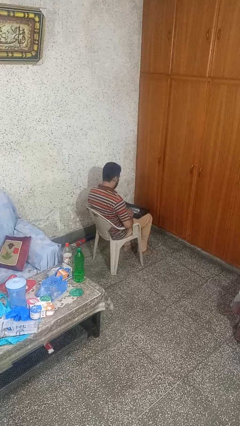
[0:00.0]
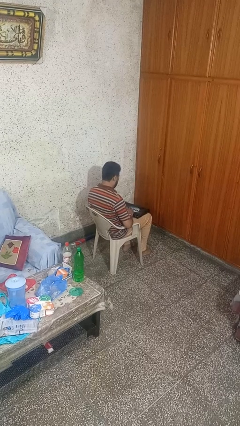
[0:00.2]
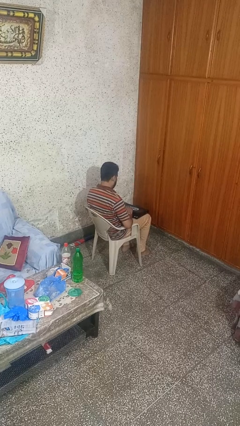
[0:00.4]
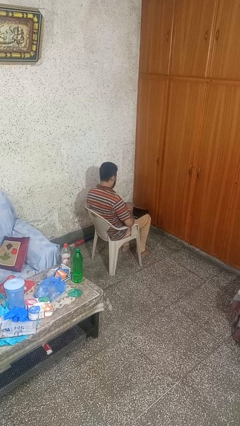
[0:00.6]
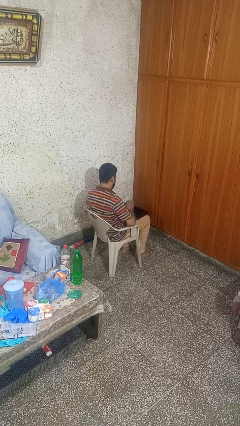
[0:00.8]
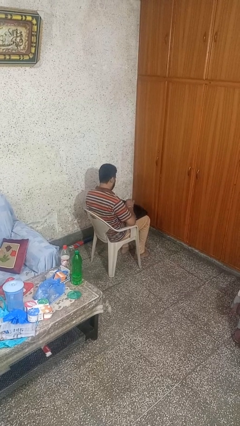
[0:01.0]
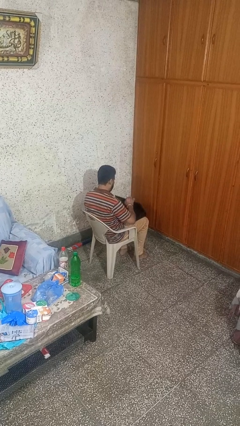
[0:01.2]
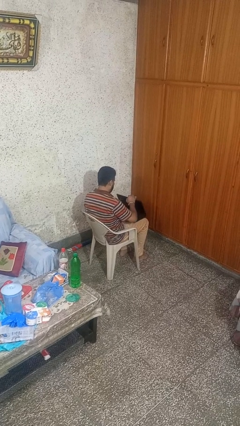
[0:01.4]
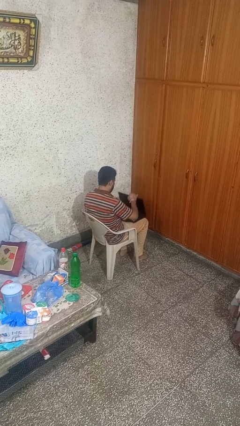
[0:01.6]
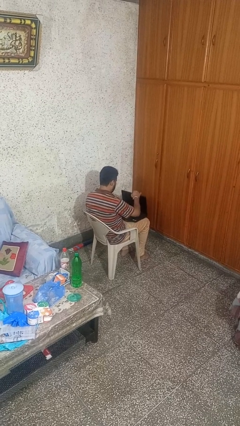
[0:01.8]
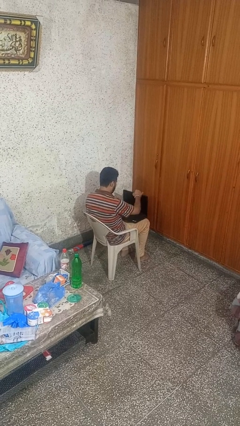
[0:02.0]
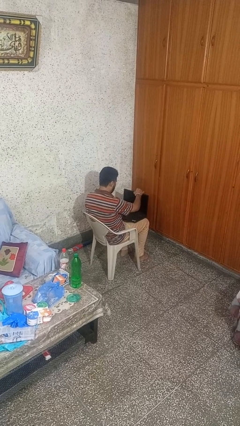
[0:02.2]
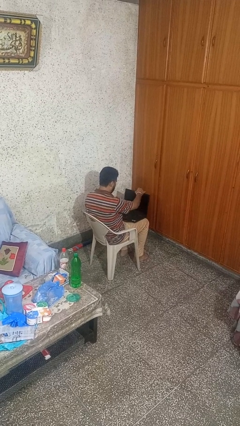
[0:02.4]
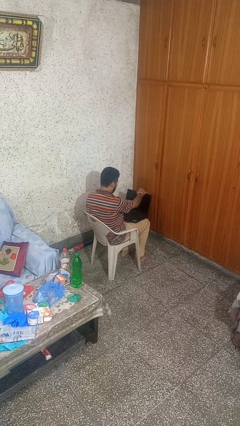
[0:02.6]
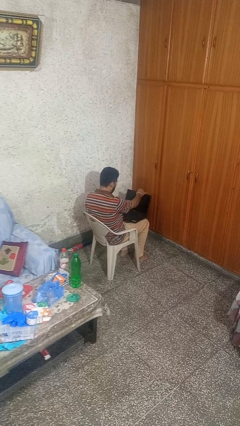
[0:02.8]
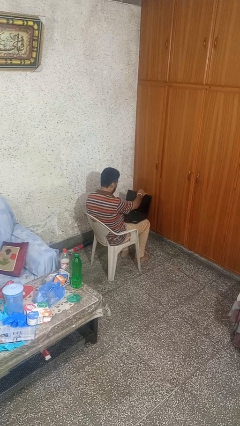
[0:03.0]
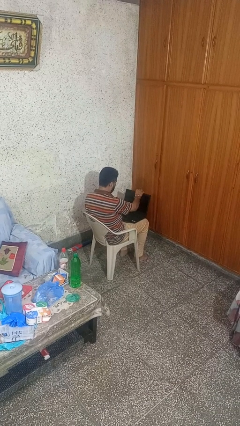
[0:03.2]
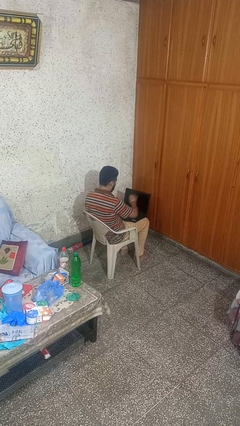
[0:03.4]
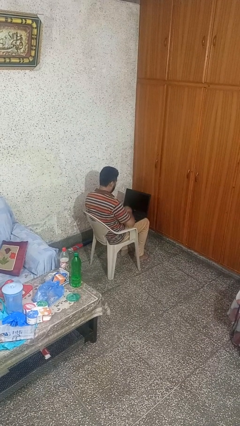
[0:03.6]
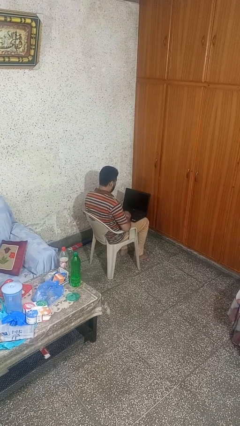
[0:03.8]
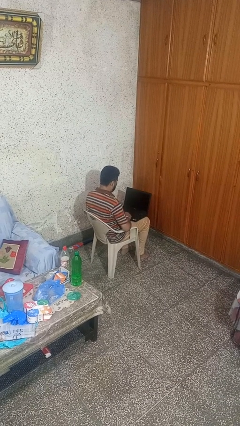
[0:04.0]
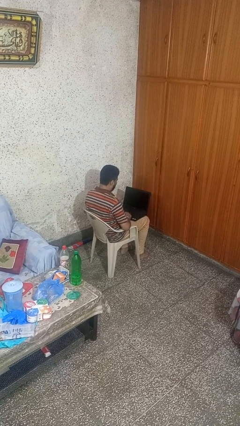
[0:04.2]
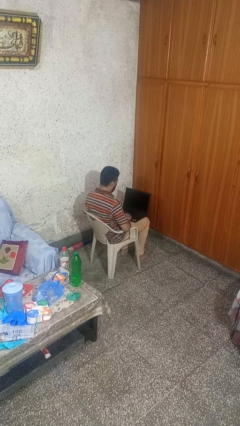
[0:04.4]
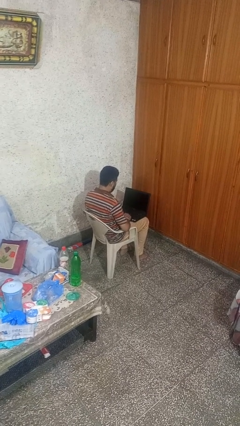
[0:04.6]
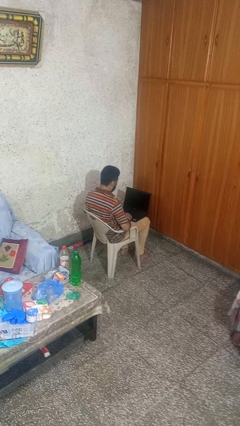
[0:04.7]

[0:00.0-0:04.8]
person opens laptop

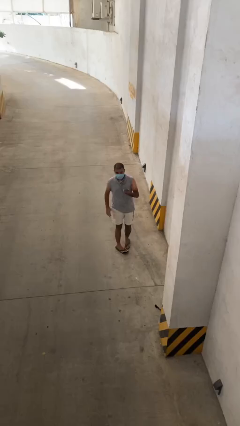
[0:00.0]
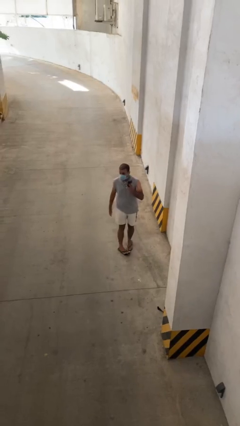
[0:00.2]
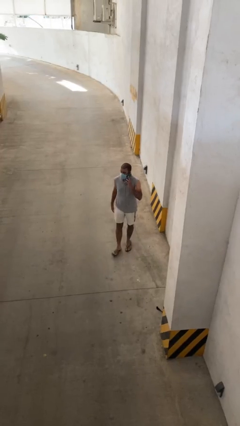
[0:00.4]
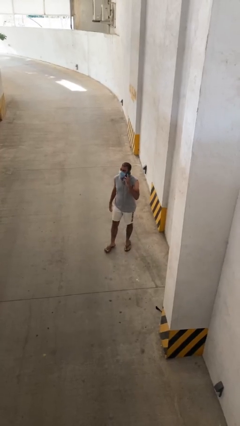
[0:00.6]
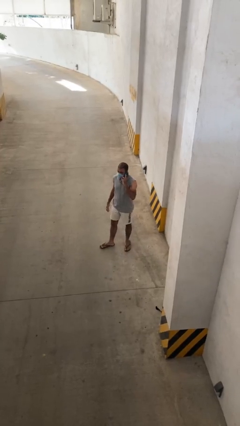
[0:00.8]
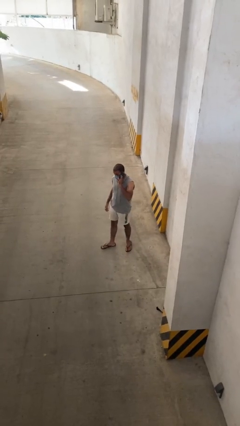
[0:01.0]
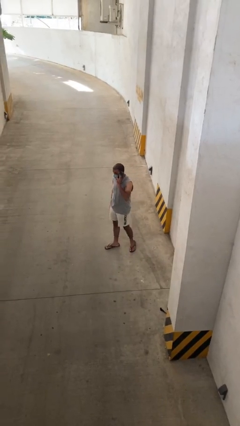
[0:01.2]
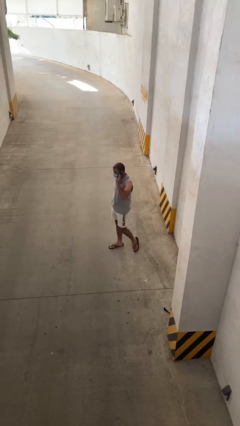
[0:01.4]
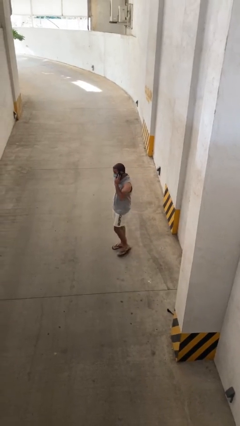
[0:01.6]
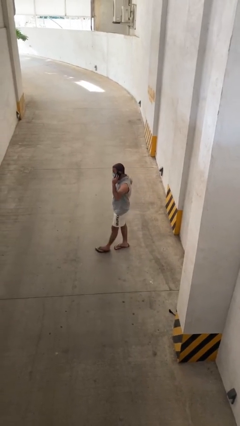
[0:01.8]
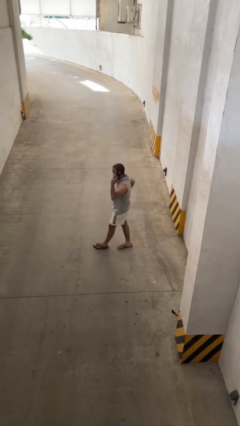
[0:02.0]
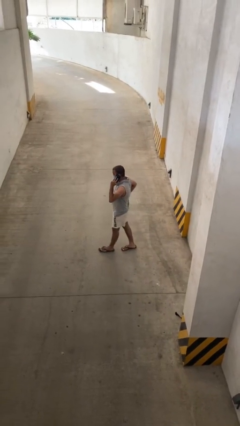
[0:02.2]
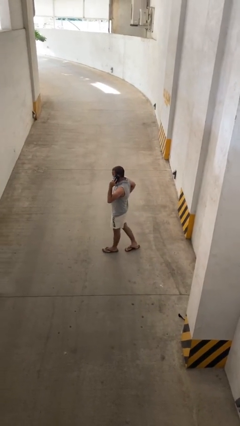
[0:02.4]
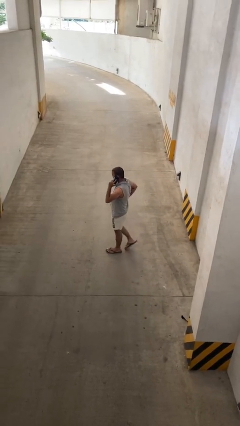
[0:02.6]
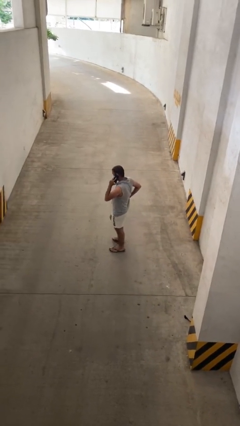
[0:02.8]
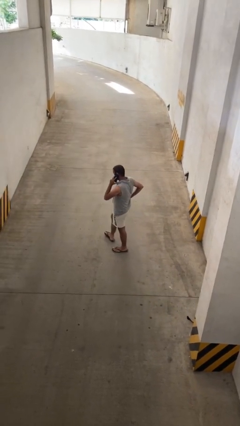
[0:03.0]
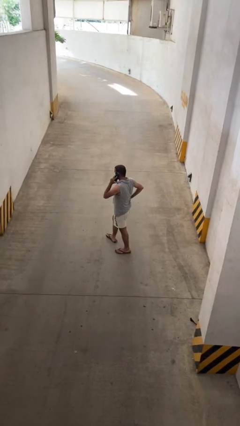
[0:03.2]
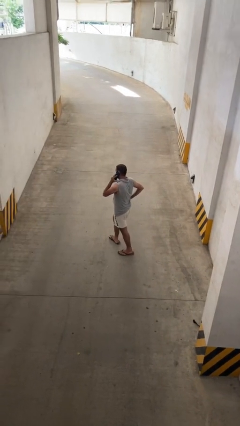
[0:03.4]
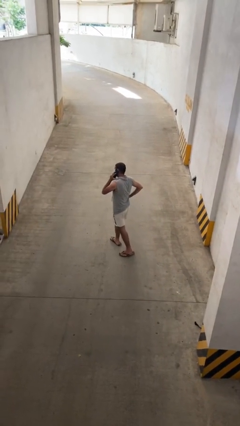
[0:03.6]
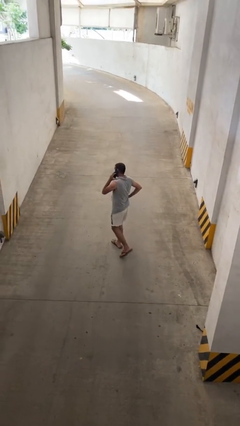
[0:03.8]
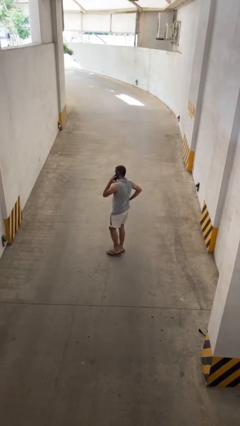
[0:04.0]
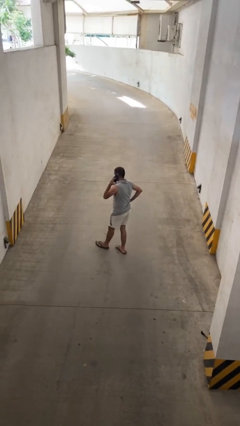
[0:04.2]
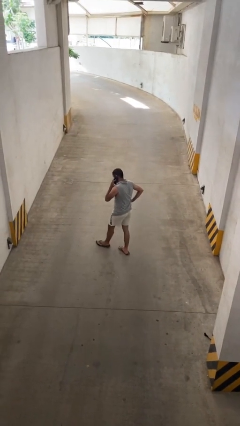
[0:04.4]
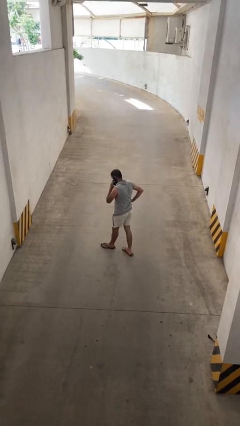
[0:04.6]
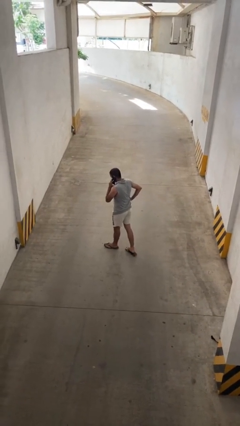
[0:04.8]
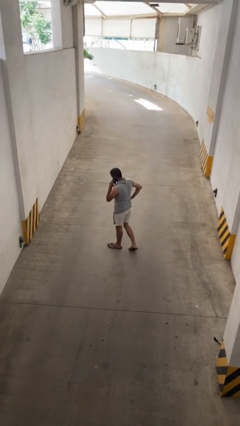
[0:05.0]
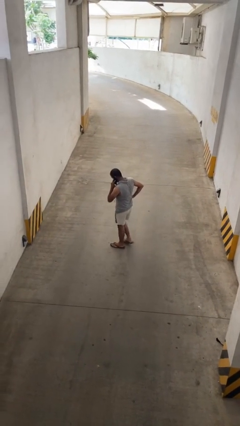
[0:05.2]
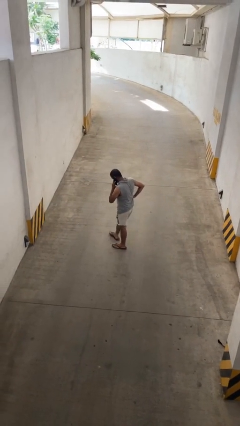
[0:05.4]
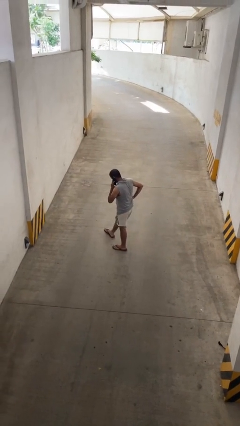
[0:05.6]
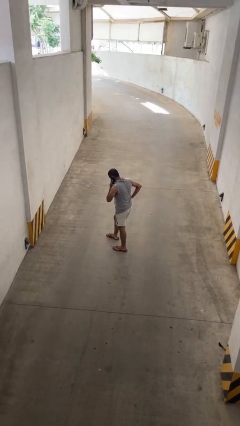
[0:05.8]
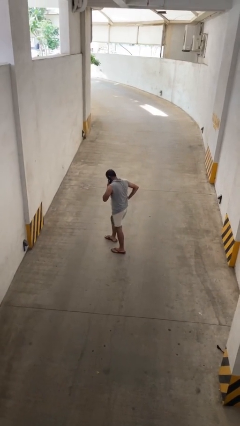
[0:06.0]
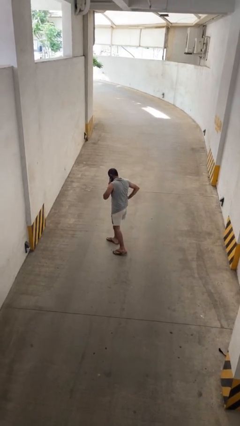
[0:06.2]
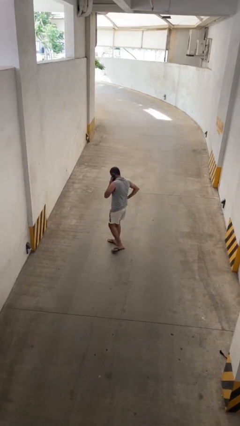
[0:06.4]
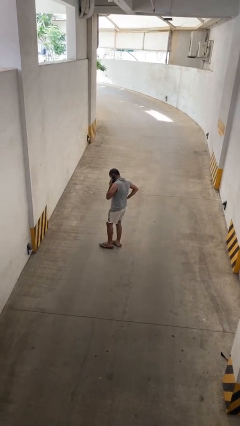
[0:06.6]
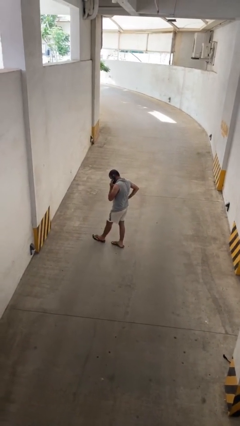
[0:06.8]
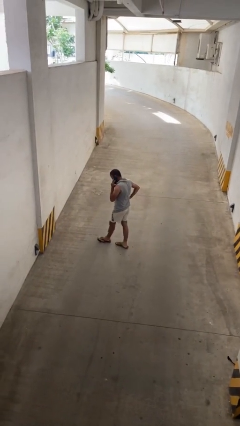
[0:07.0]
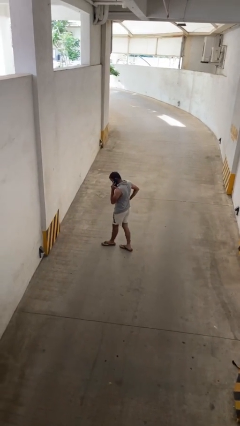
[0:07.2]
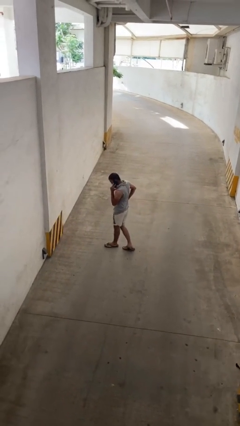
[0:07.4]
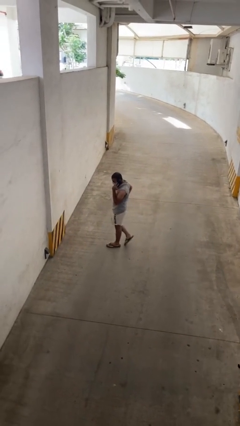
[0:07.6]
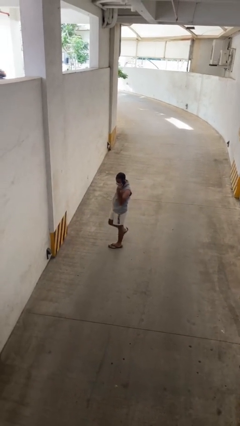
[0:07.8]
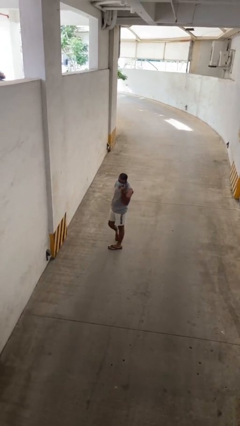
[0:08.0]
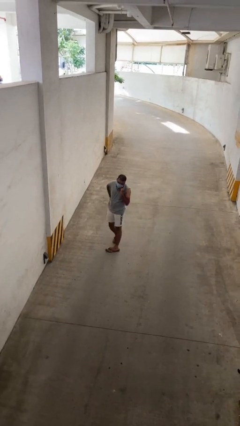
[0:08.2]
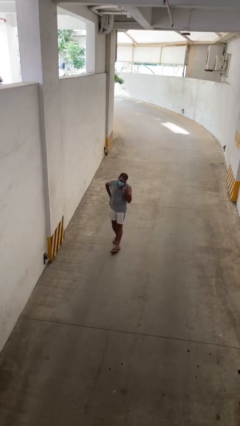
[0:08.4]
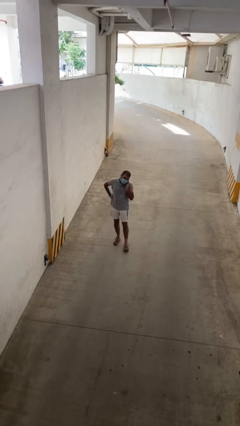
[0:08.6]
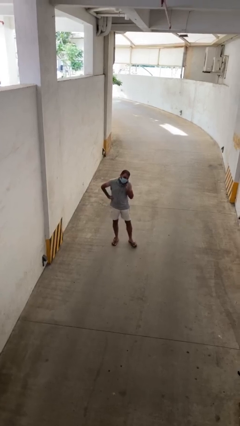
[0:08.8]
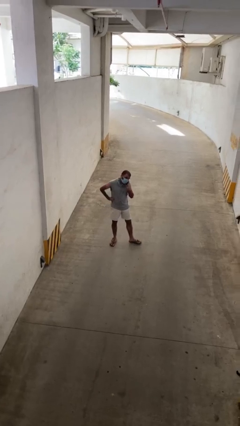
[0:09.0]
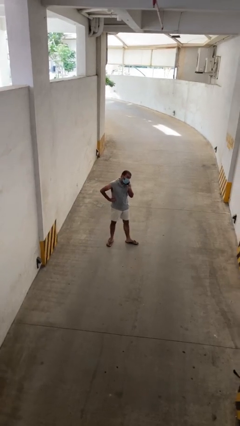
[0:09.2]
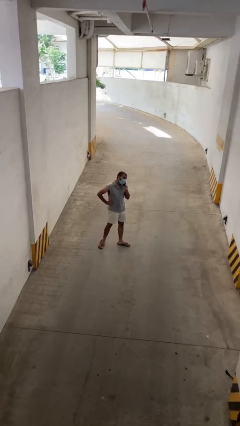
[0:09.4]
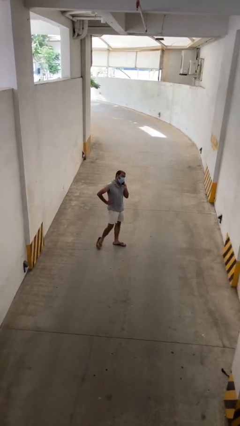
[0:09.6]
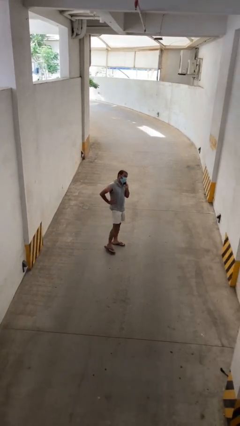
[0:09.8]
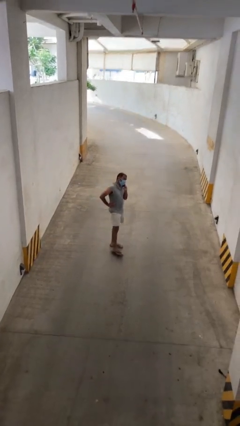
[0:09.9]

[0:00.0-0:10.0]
person talks on phone

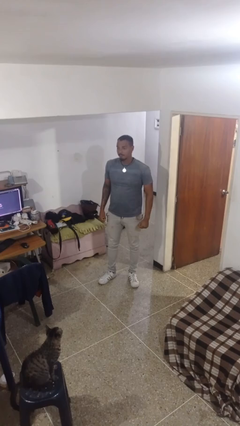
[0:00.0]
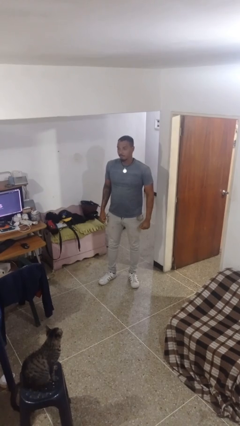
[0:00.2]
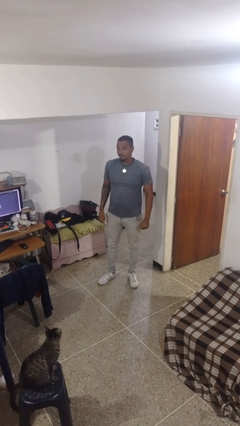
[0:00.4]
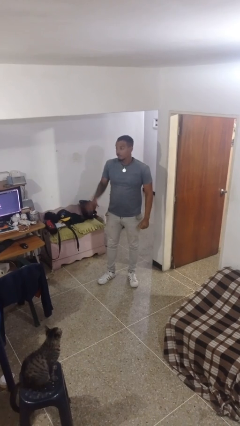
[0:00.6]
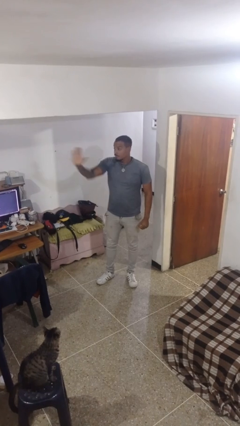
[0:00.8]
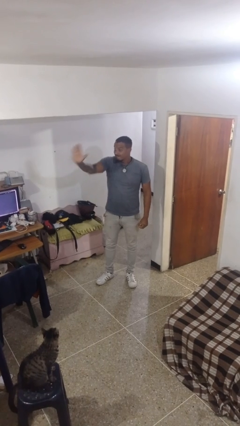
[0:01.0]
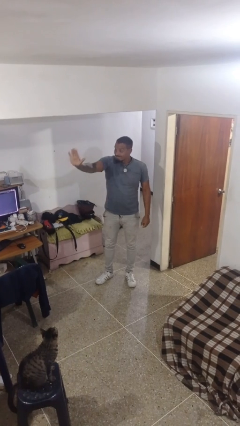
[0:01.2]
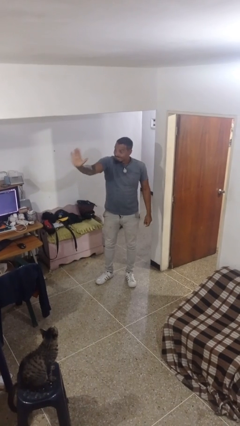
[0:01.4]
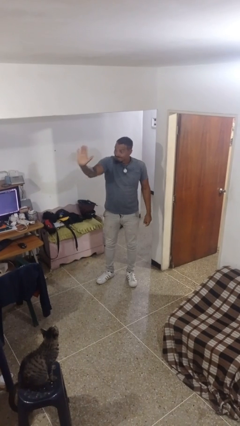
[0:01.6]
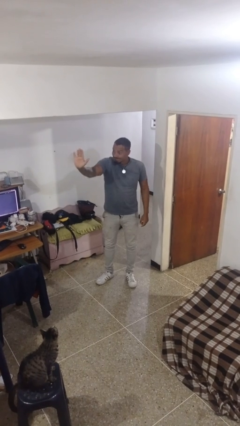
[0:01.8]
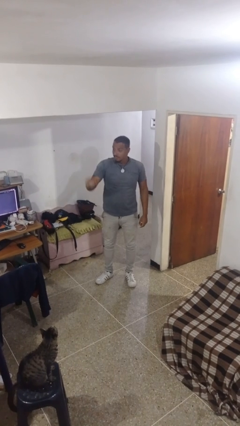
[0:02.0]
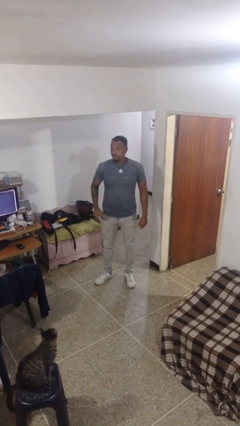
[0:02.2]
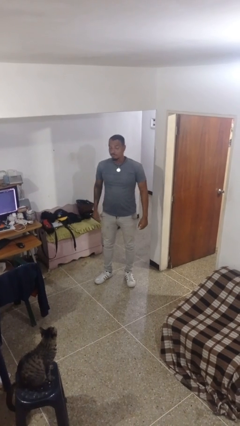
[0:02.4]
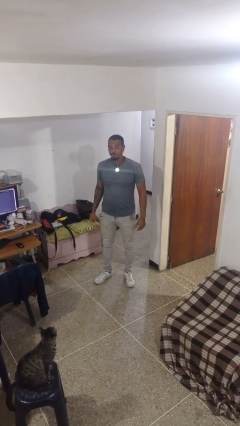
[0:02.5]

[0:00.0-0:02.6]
person gestures stop

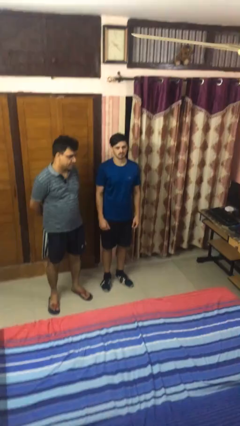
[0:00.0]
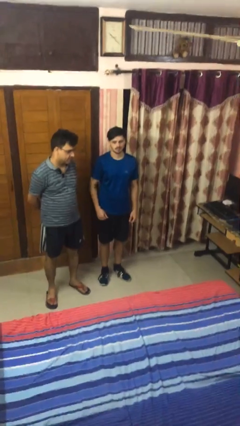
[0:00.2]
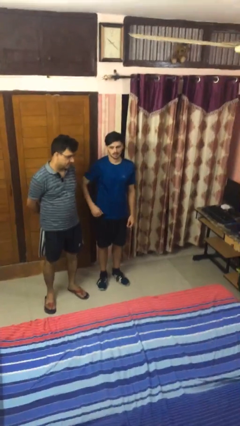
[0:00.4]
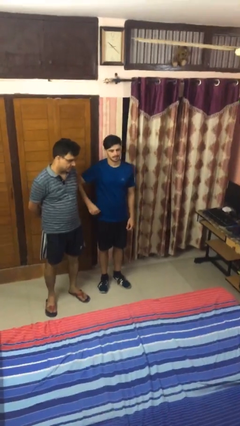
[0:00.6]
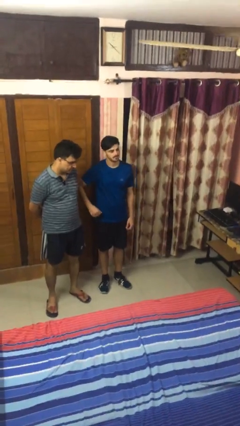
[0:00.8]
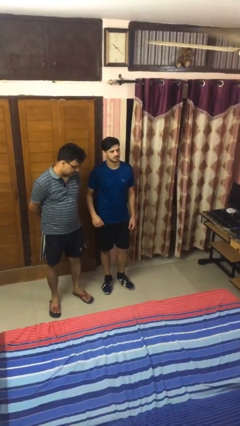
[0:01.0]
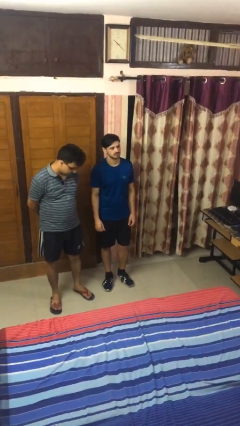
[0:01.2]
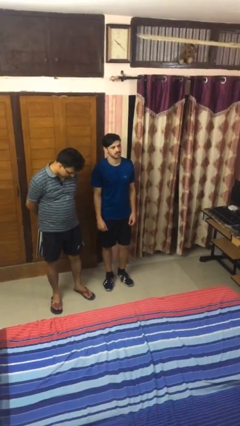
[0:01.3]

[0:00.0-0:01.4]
person nudges person with elbow
